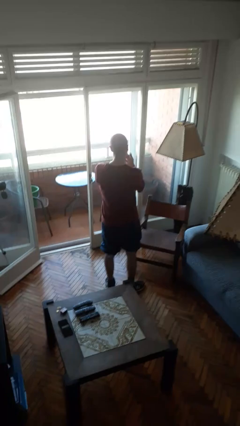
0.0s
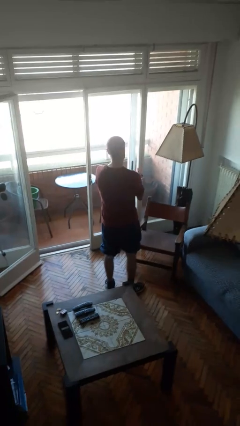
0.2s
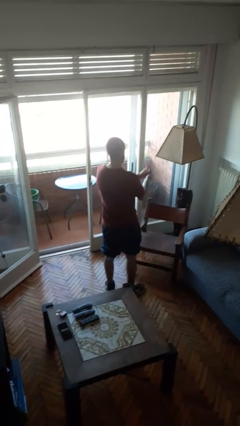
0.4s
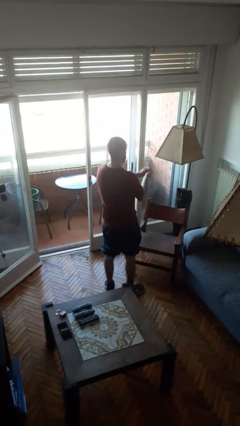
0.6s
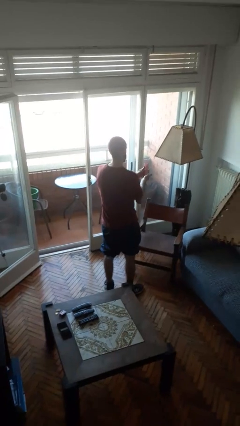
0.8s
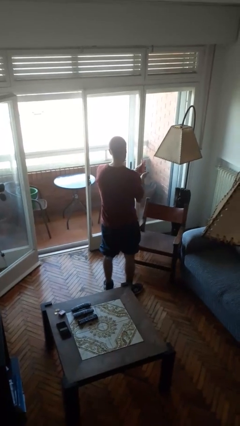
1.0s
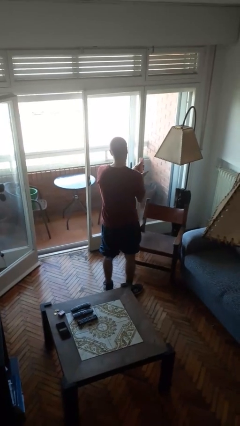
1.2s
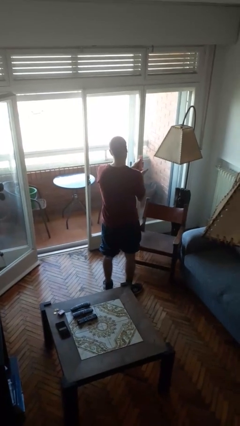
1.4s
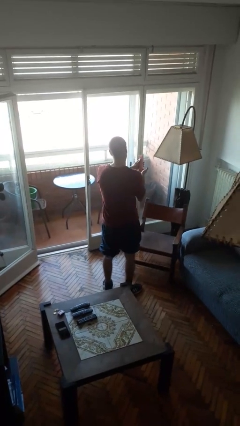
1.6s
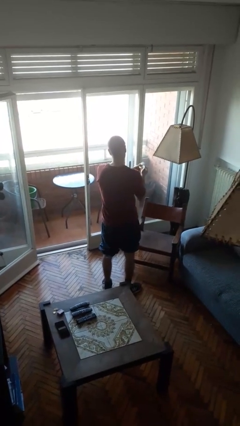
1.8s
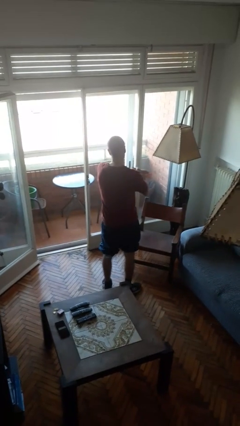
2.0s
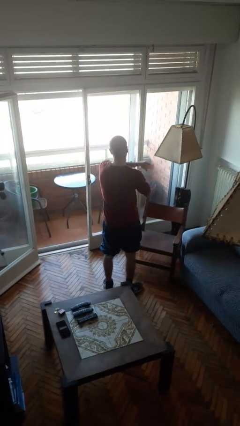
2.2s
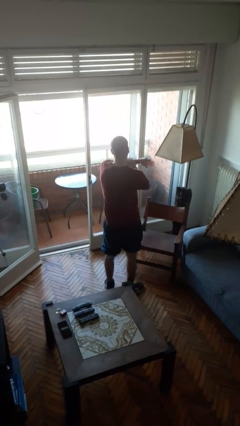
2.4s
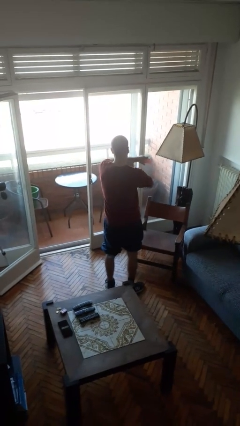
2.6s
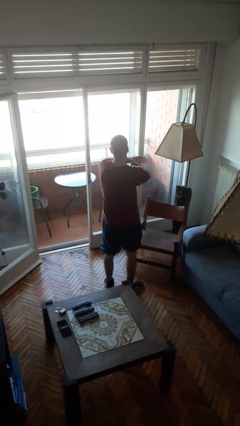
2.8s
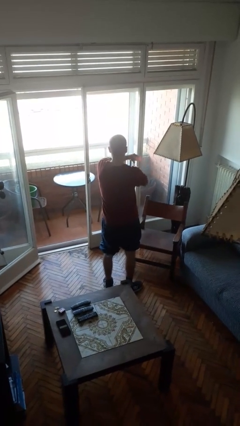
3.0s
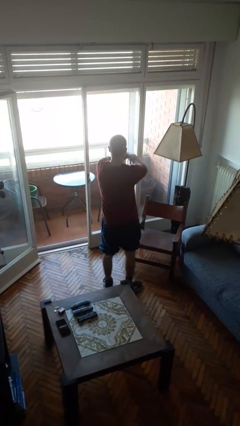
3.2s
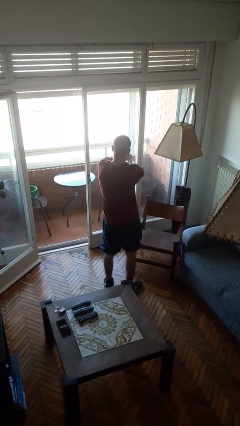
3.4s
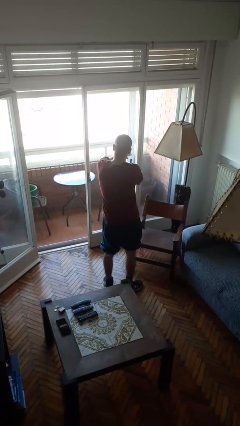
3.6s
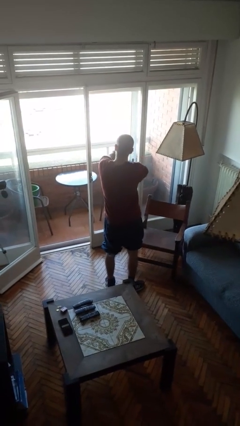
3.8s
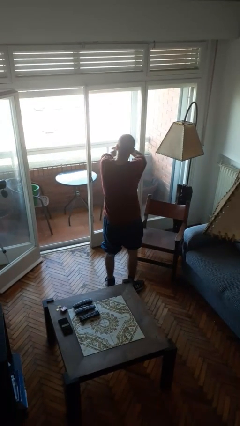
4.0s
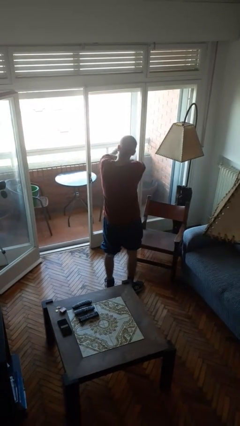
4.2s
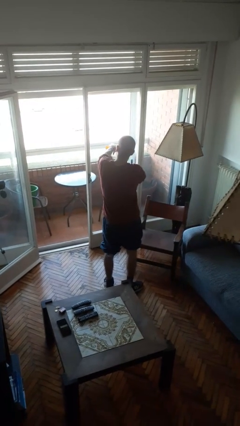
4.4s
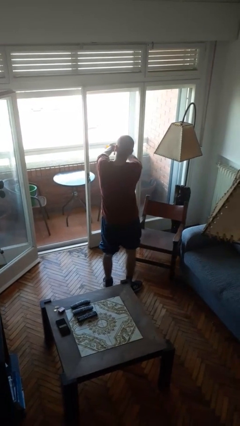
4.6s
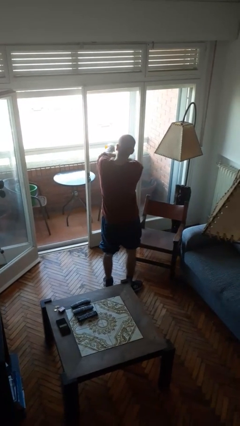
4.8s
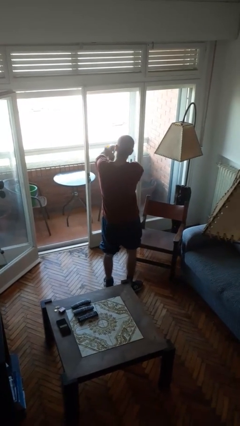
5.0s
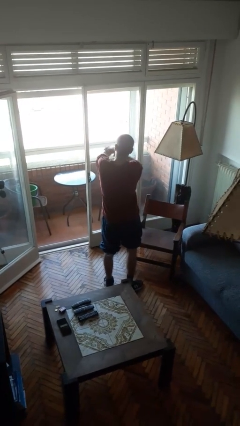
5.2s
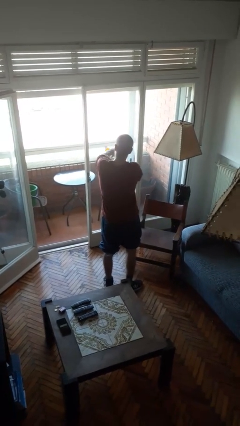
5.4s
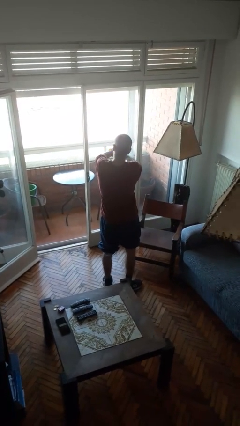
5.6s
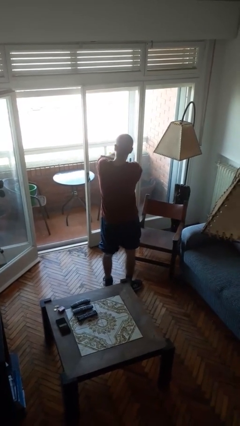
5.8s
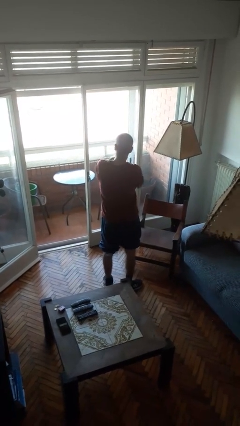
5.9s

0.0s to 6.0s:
person applies sunscreen

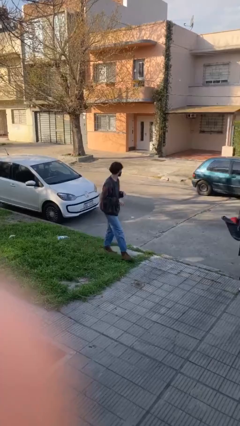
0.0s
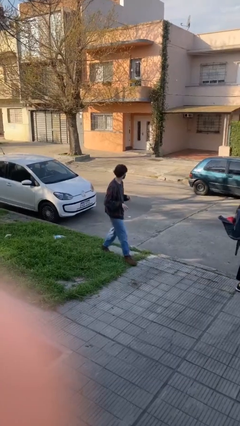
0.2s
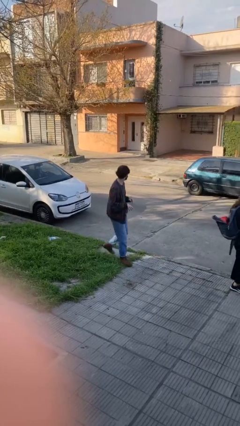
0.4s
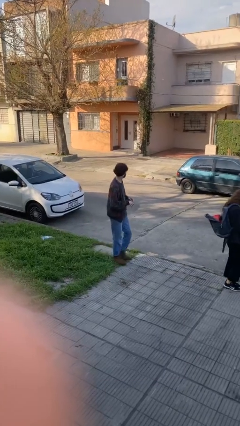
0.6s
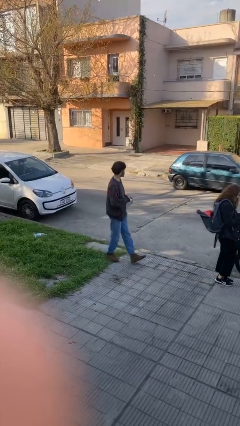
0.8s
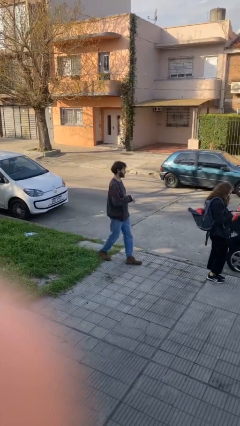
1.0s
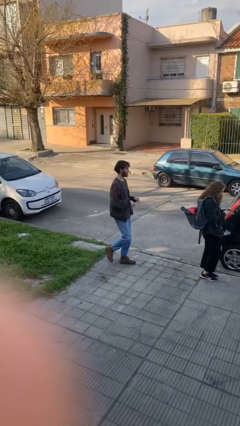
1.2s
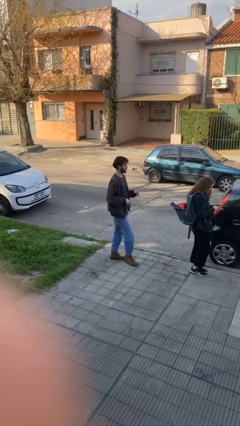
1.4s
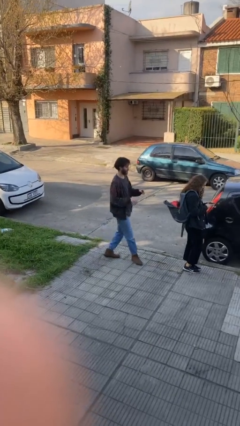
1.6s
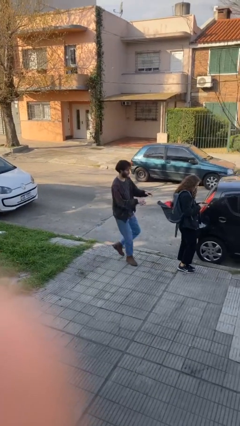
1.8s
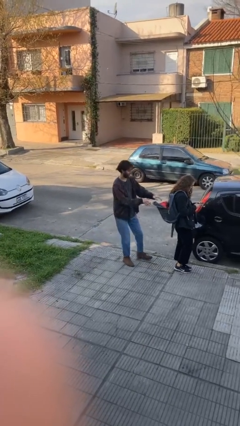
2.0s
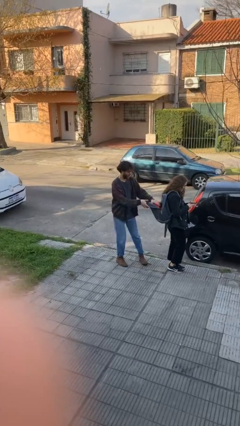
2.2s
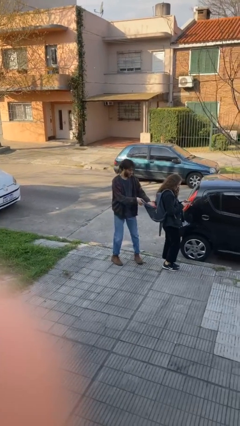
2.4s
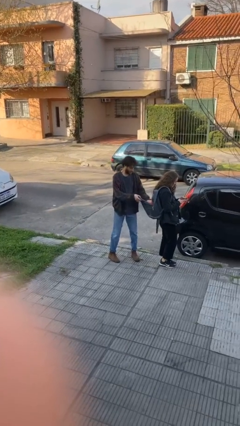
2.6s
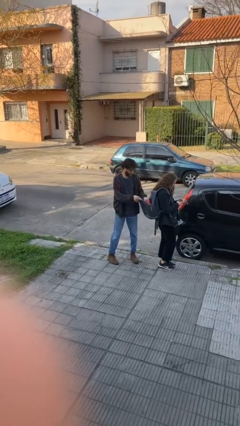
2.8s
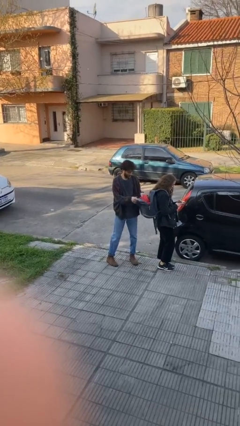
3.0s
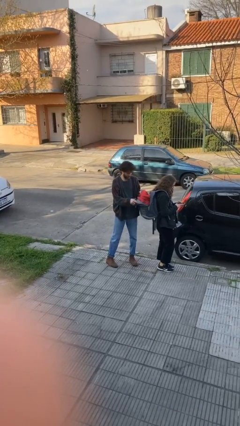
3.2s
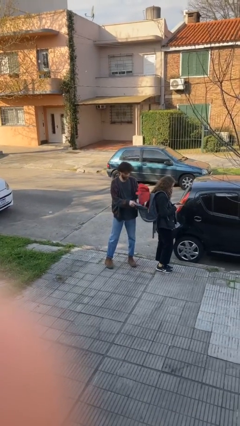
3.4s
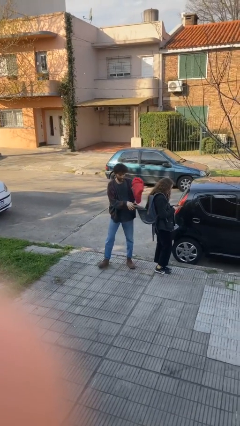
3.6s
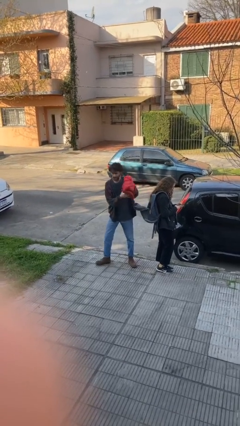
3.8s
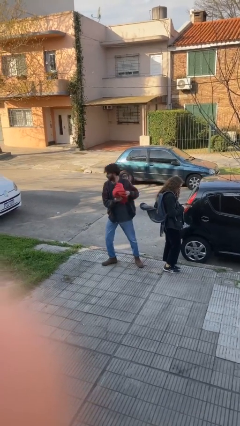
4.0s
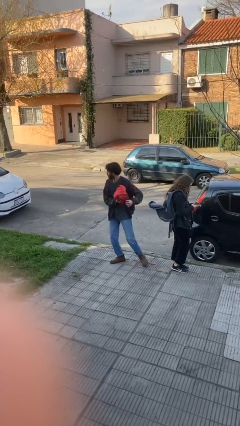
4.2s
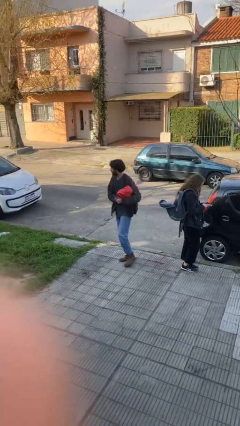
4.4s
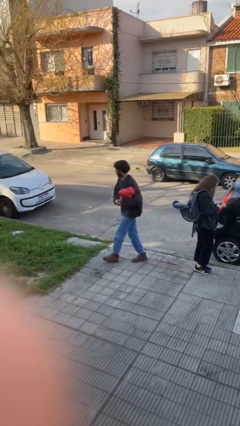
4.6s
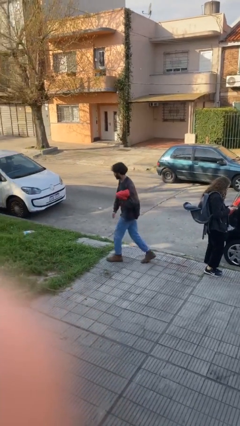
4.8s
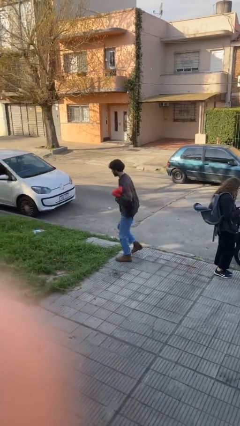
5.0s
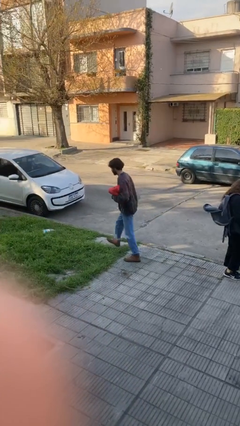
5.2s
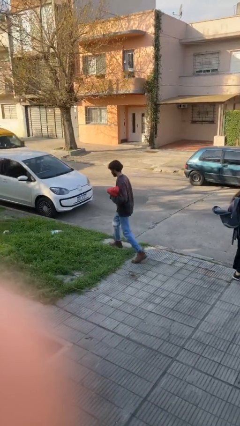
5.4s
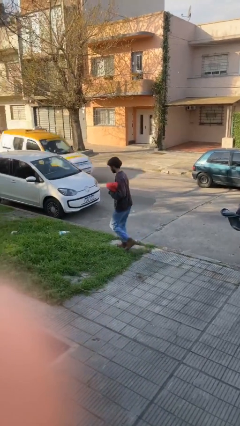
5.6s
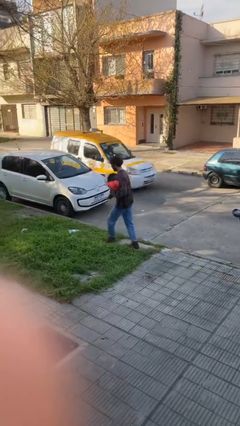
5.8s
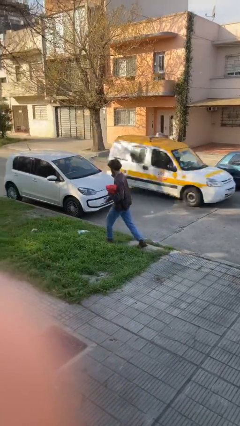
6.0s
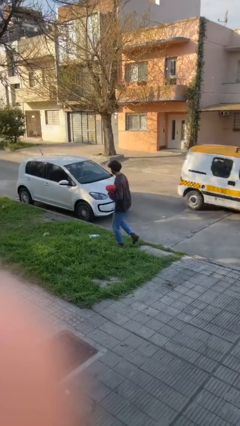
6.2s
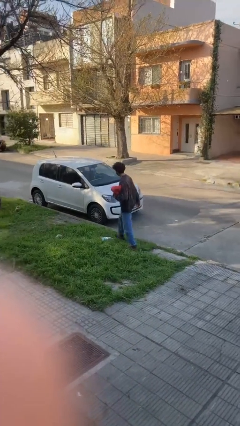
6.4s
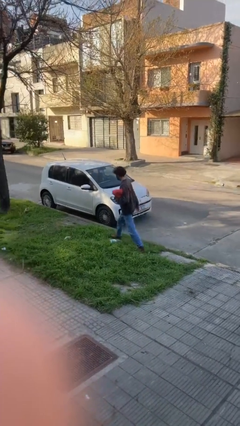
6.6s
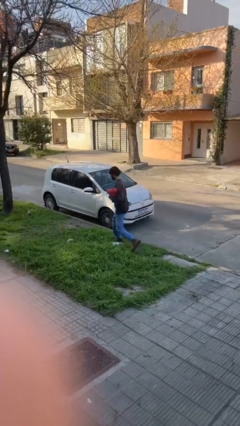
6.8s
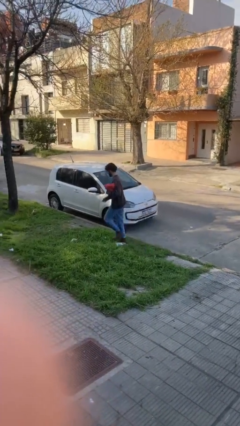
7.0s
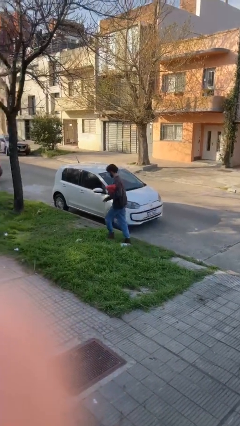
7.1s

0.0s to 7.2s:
person steals object from person

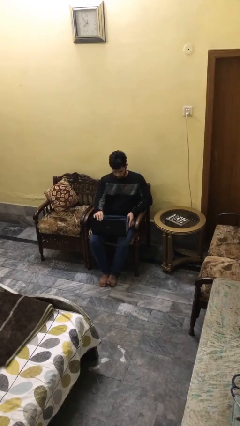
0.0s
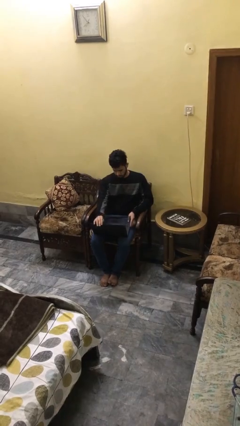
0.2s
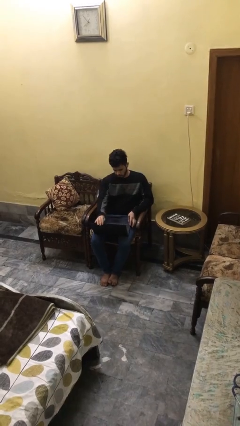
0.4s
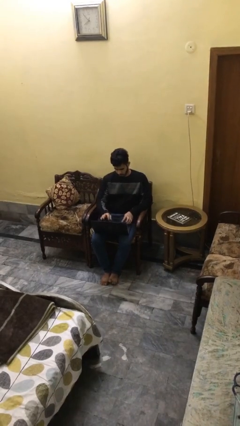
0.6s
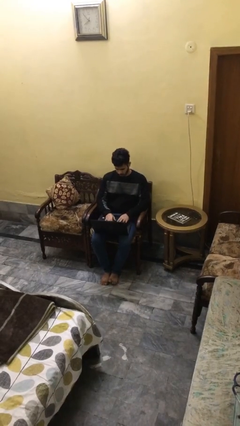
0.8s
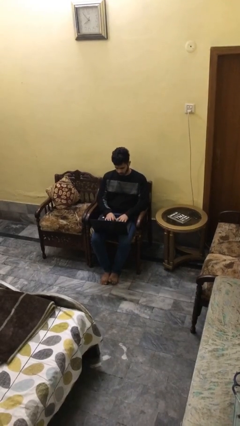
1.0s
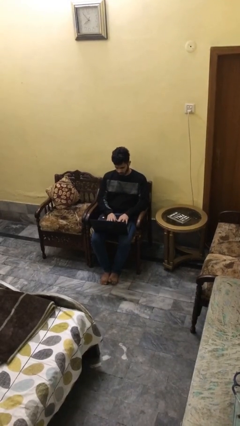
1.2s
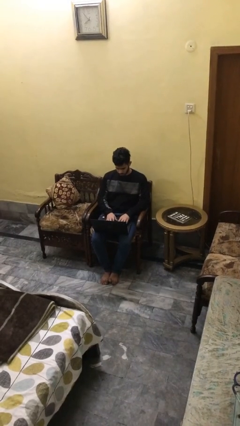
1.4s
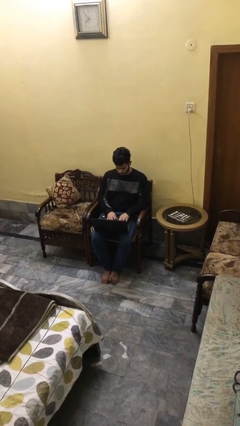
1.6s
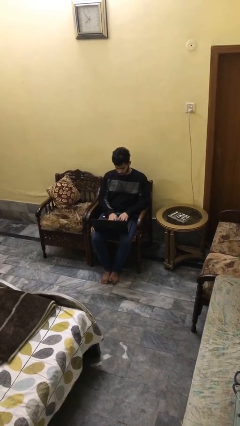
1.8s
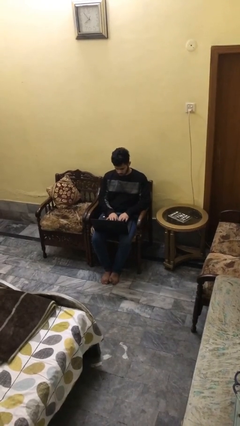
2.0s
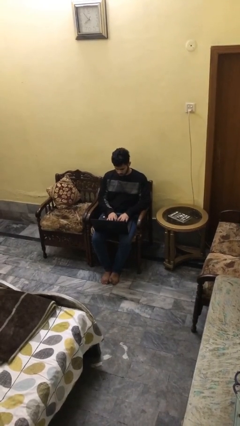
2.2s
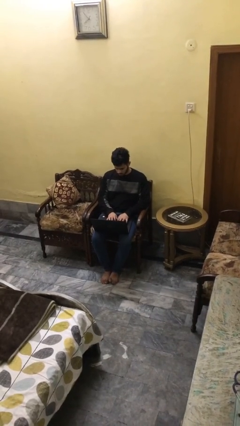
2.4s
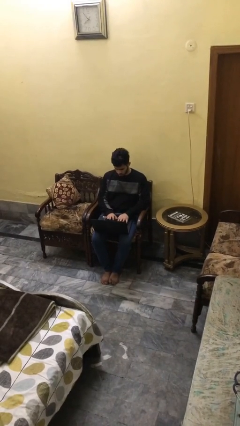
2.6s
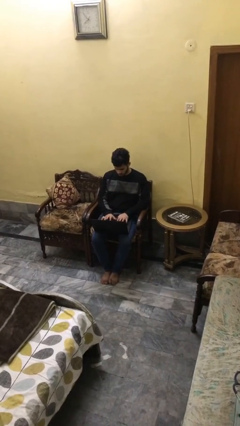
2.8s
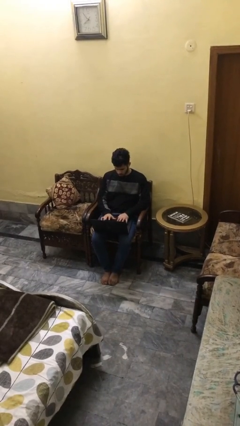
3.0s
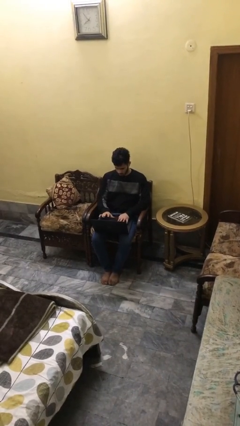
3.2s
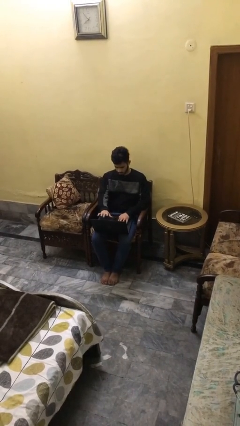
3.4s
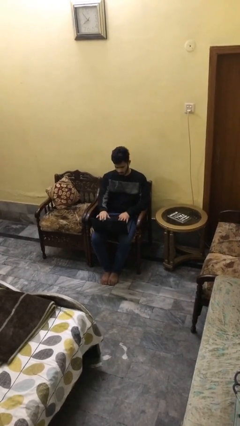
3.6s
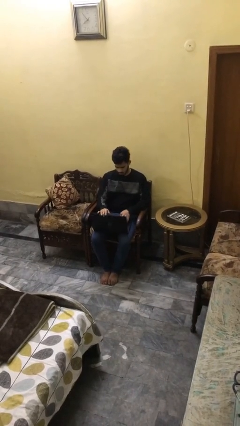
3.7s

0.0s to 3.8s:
person interacts with laptop

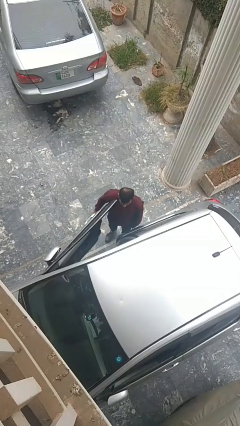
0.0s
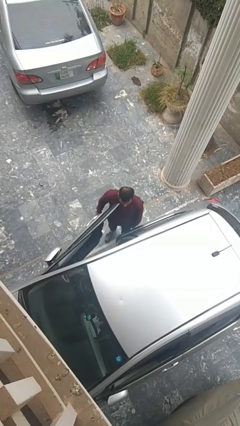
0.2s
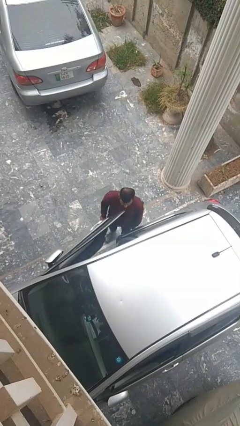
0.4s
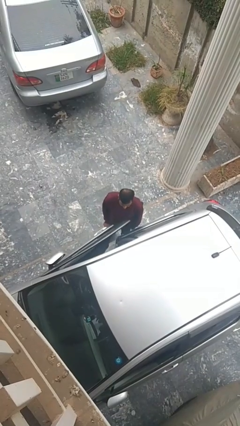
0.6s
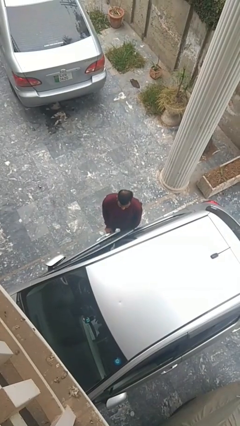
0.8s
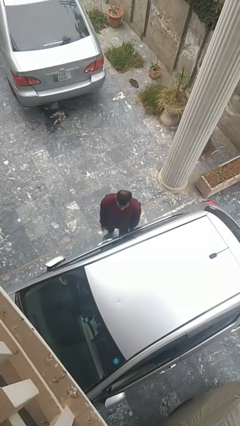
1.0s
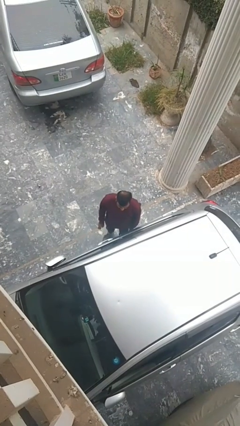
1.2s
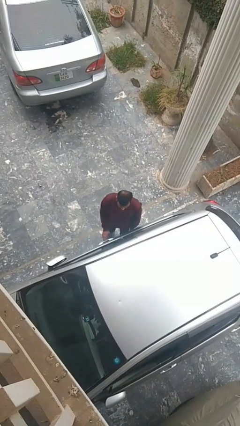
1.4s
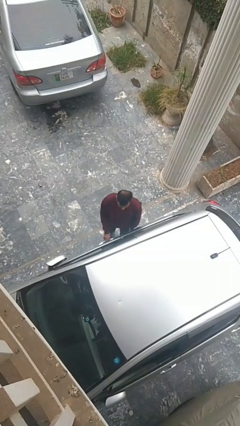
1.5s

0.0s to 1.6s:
person closes car door
